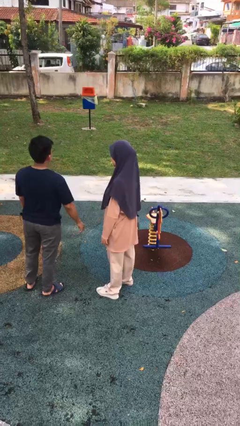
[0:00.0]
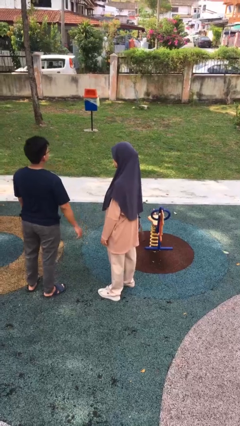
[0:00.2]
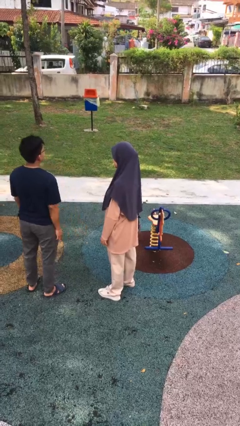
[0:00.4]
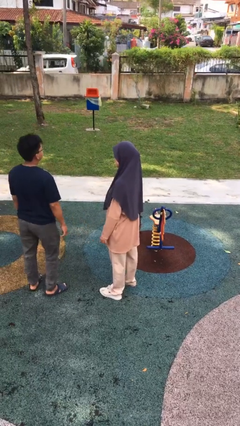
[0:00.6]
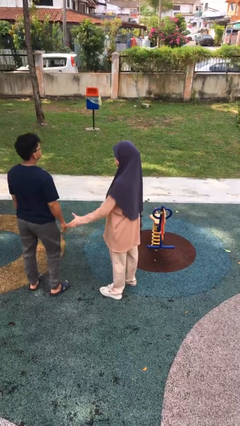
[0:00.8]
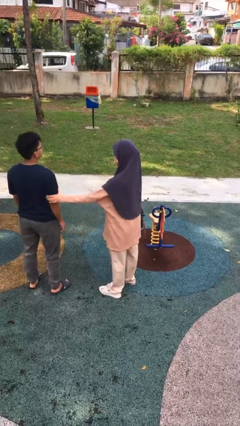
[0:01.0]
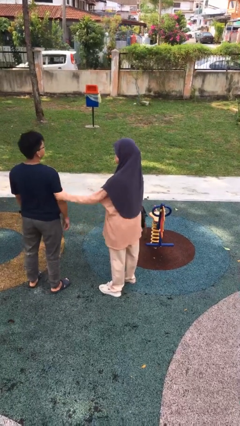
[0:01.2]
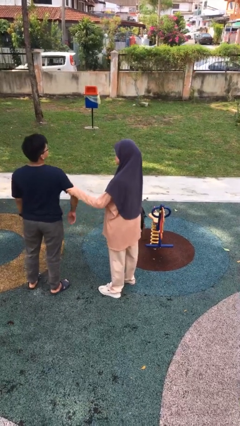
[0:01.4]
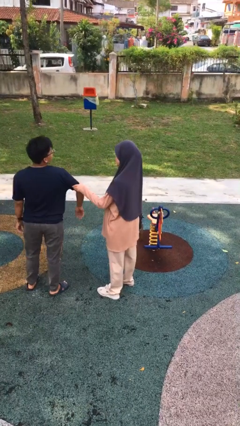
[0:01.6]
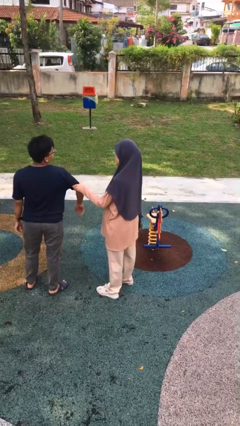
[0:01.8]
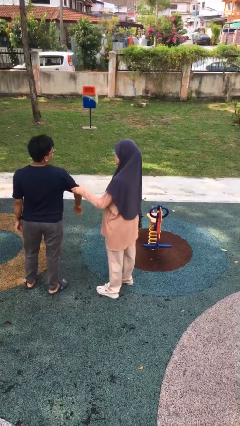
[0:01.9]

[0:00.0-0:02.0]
person grabs person by bicep

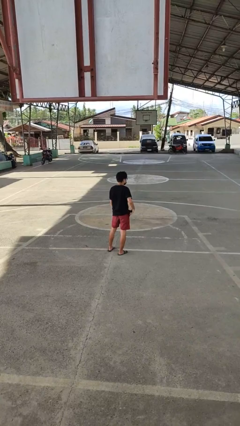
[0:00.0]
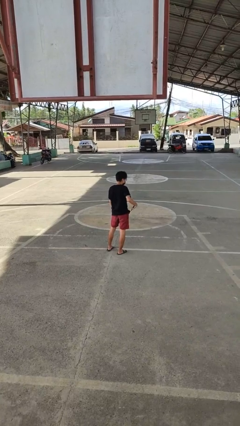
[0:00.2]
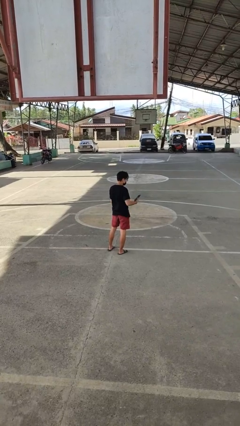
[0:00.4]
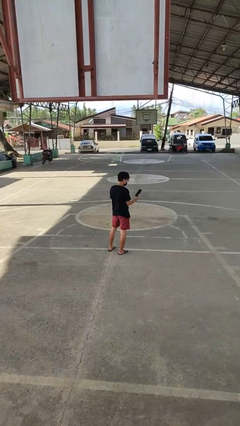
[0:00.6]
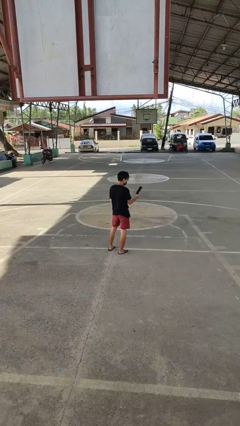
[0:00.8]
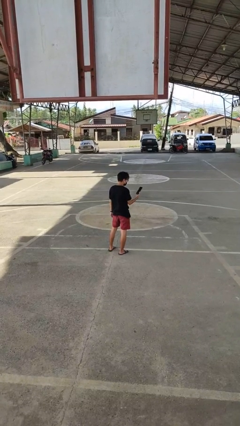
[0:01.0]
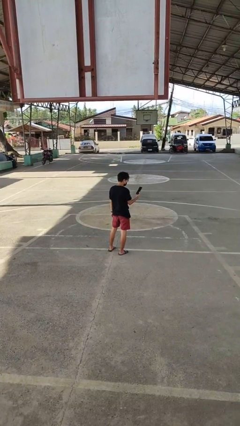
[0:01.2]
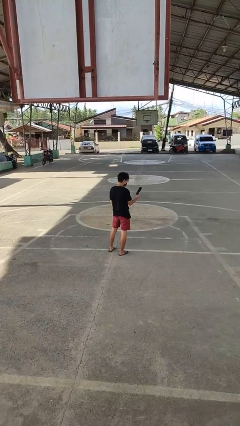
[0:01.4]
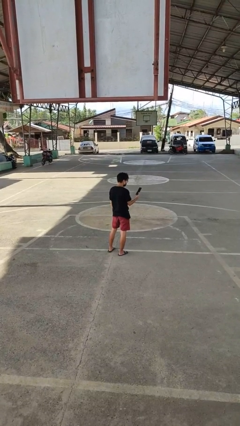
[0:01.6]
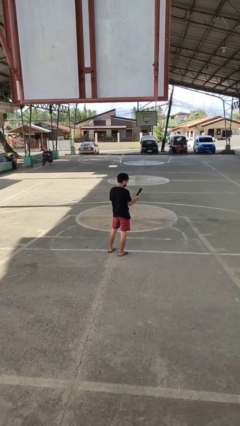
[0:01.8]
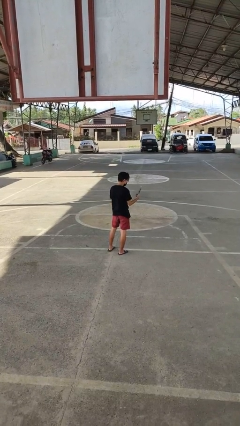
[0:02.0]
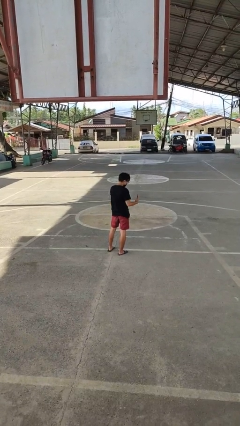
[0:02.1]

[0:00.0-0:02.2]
person takes phone from pocket

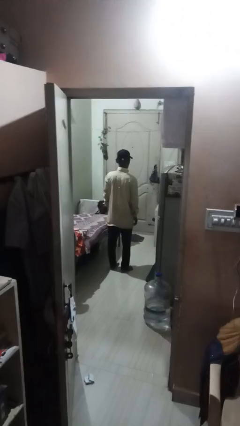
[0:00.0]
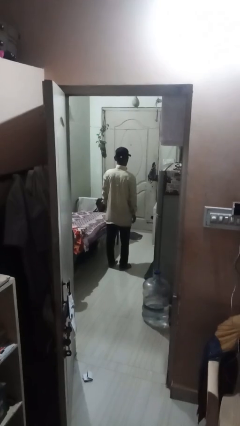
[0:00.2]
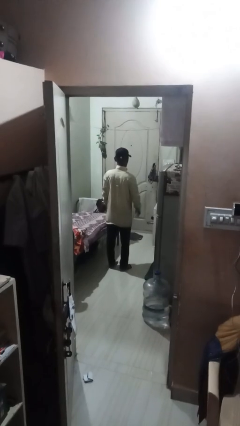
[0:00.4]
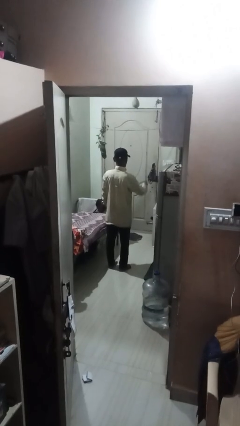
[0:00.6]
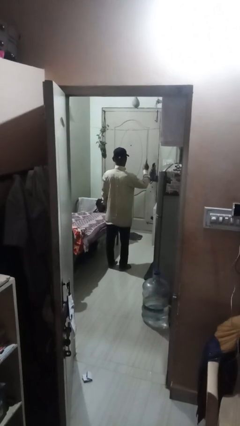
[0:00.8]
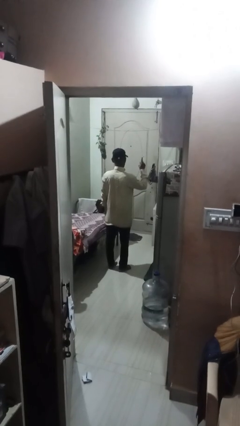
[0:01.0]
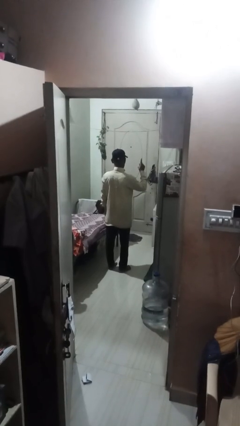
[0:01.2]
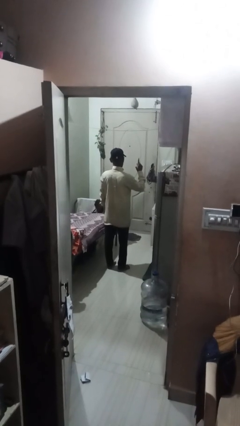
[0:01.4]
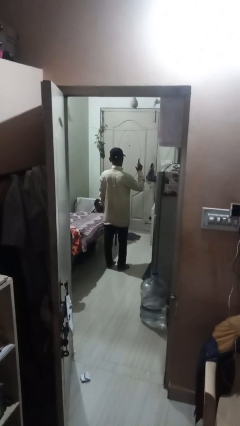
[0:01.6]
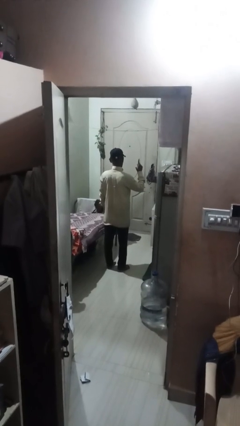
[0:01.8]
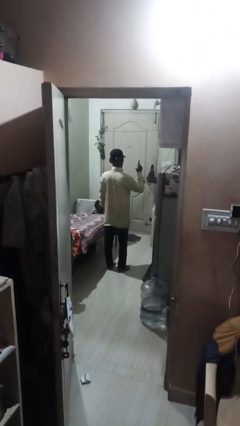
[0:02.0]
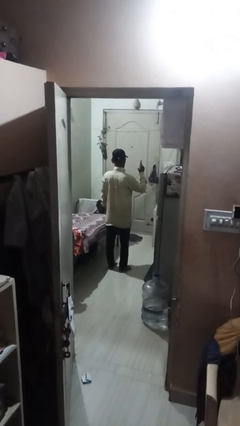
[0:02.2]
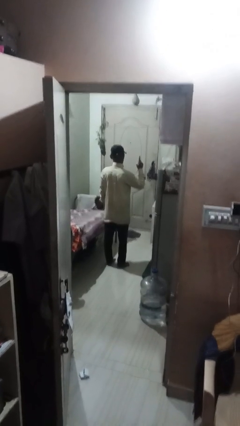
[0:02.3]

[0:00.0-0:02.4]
person gestures number one

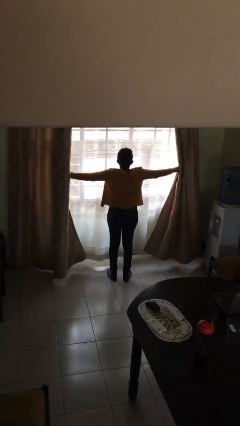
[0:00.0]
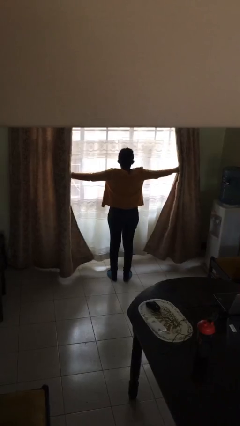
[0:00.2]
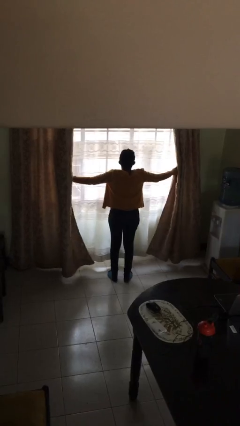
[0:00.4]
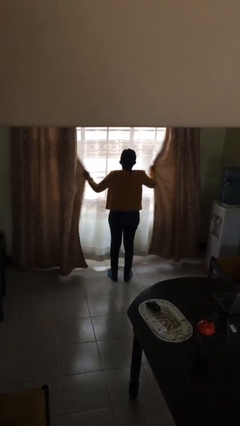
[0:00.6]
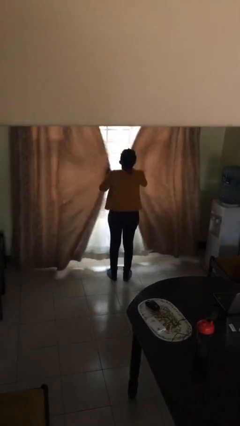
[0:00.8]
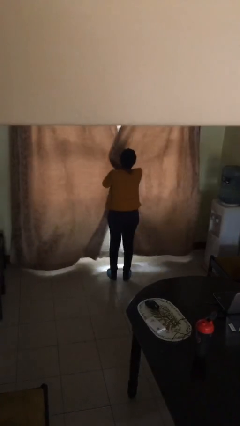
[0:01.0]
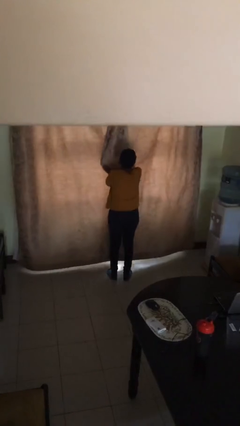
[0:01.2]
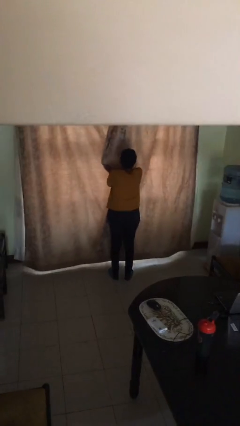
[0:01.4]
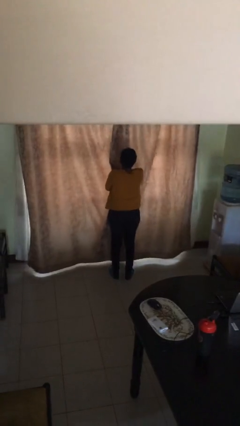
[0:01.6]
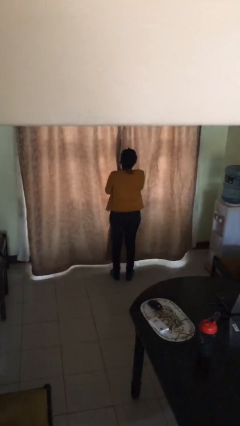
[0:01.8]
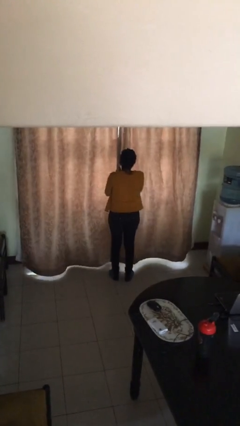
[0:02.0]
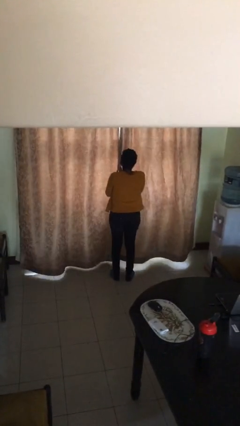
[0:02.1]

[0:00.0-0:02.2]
person closes curtains

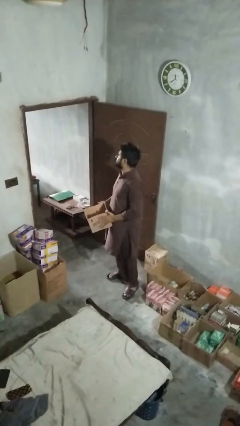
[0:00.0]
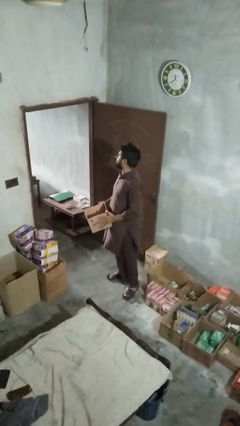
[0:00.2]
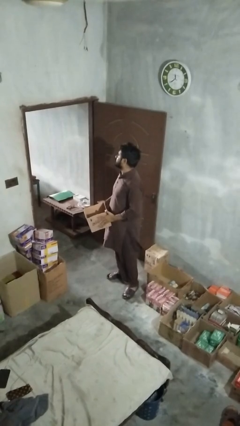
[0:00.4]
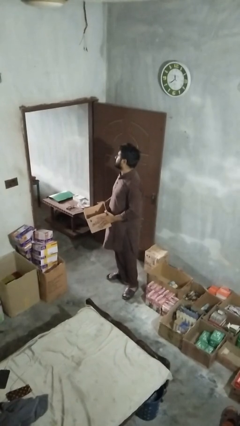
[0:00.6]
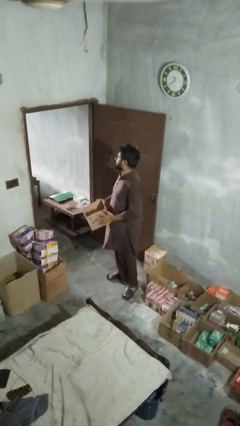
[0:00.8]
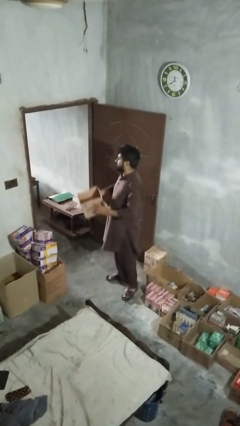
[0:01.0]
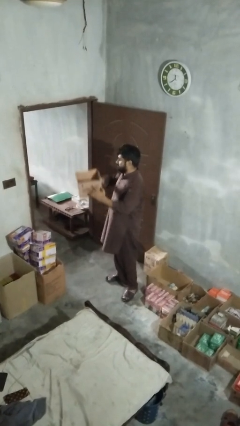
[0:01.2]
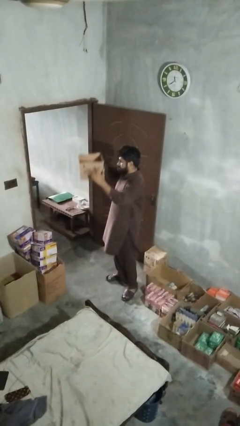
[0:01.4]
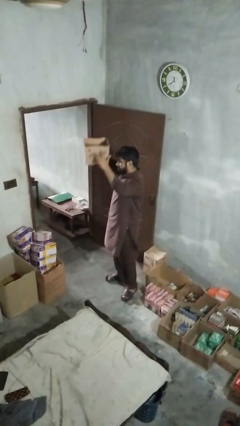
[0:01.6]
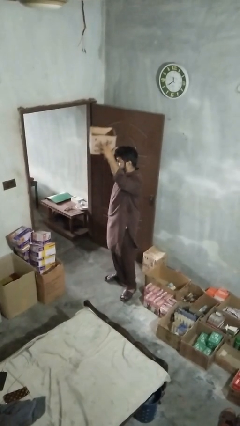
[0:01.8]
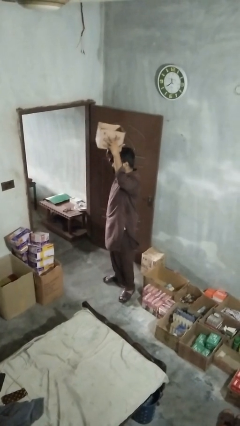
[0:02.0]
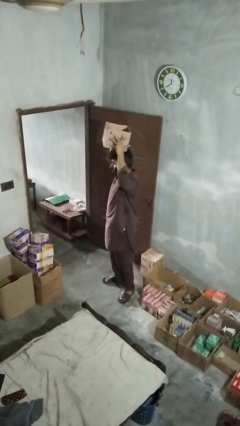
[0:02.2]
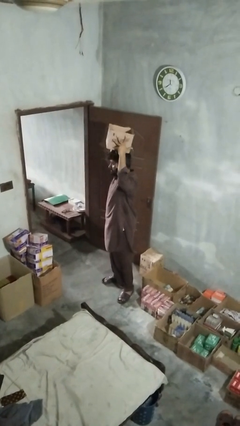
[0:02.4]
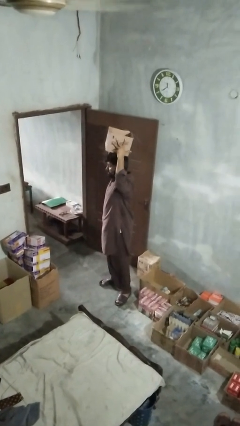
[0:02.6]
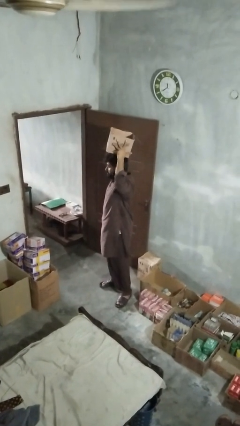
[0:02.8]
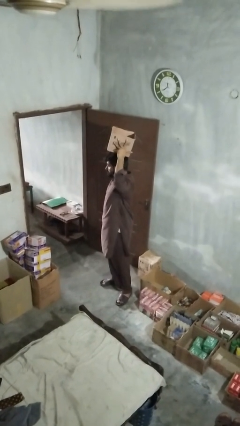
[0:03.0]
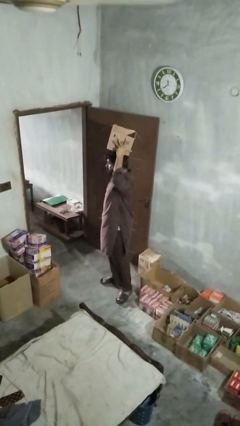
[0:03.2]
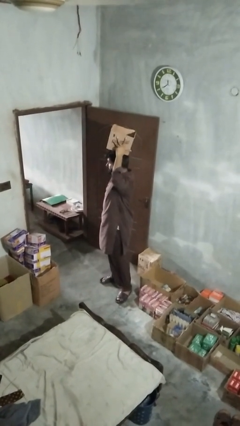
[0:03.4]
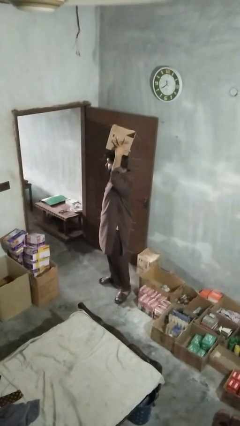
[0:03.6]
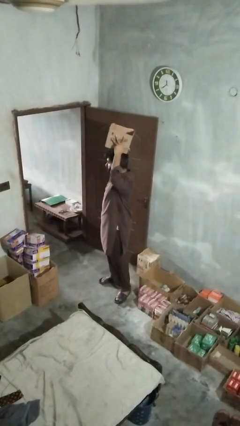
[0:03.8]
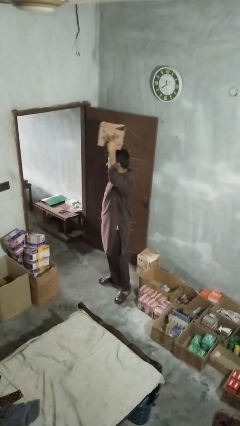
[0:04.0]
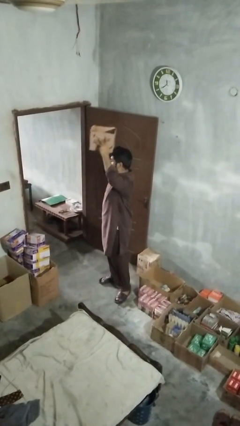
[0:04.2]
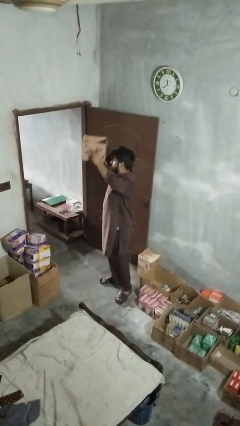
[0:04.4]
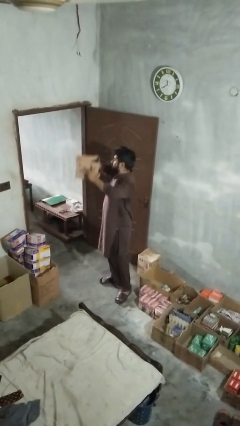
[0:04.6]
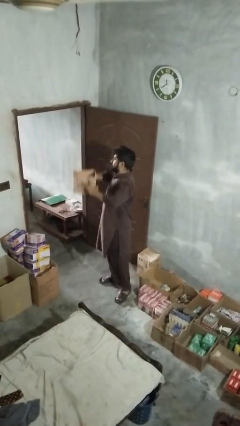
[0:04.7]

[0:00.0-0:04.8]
person holds object above head

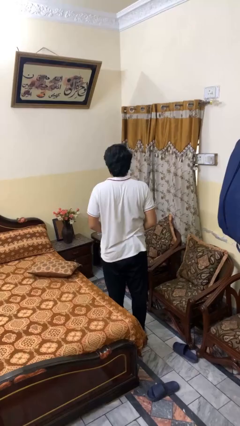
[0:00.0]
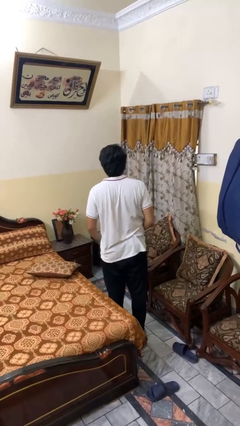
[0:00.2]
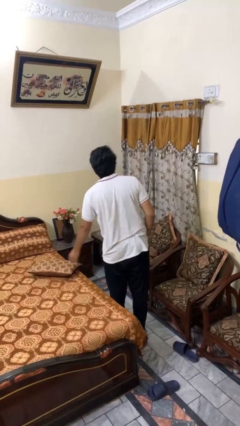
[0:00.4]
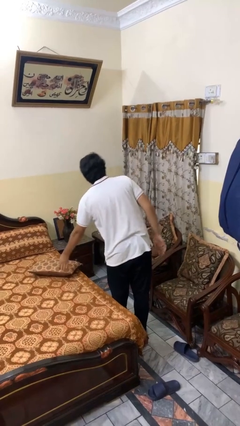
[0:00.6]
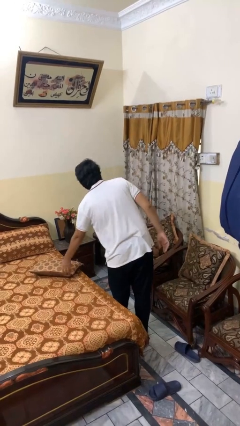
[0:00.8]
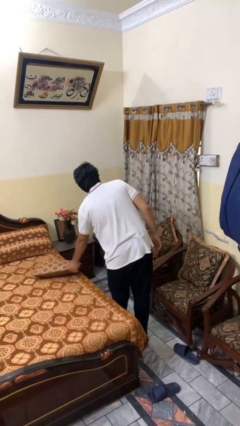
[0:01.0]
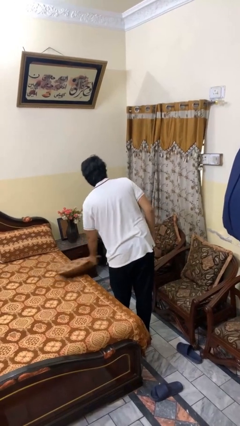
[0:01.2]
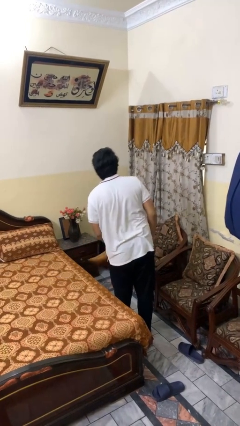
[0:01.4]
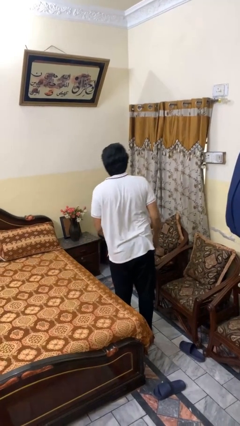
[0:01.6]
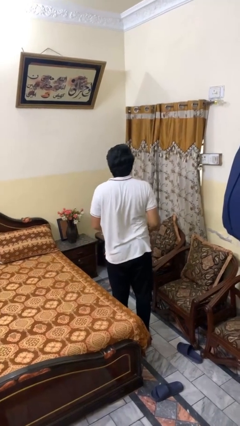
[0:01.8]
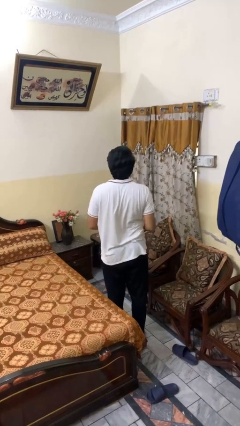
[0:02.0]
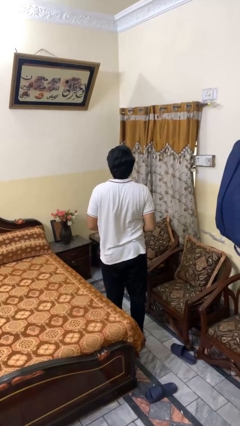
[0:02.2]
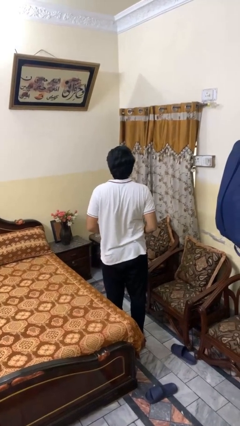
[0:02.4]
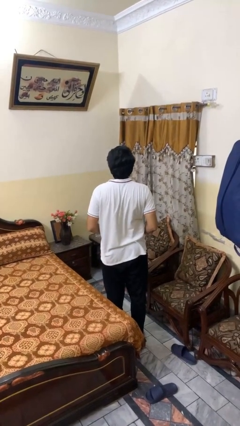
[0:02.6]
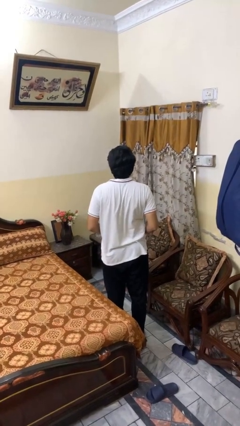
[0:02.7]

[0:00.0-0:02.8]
person picks up object from bed

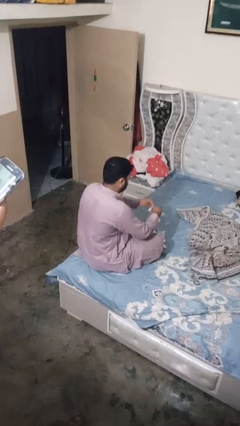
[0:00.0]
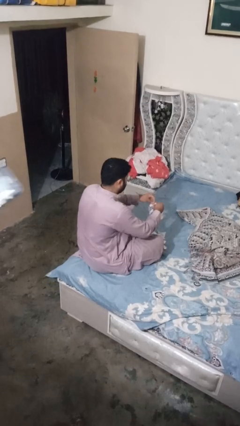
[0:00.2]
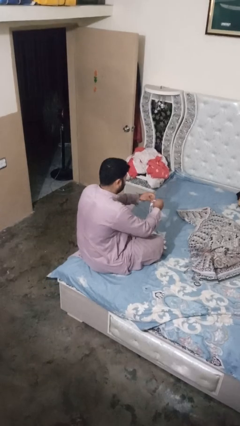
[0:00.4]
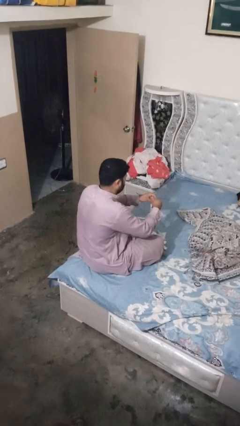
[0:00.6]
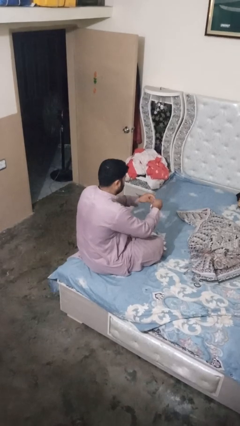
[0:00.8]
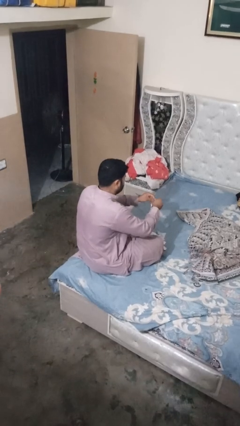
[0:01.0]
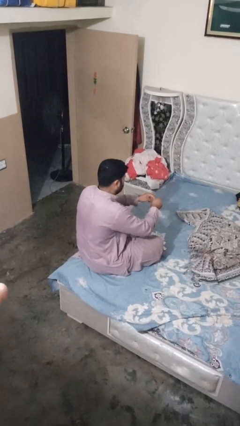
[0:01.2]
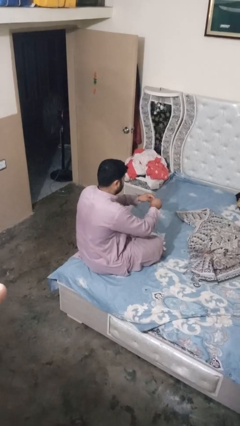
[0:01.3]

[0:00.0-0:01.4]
person tears paper
